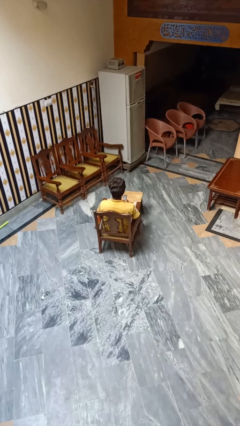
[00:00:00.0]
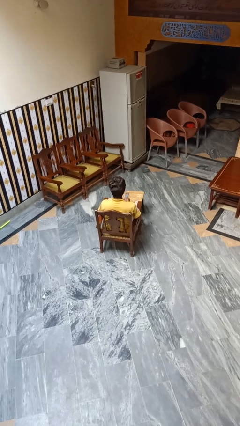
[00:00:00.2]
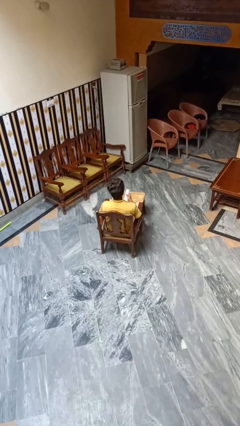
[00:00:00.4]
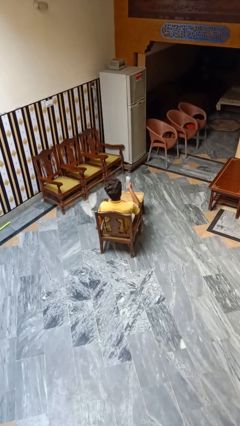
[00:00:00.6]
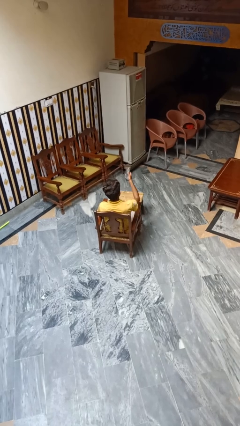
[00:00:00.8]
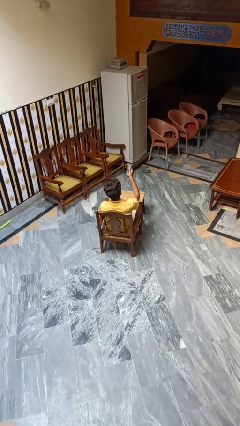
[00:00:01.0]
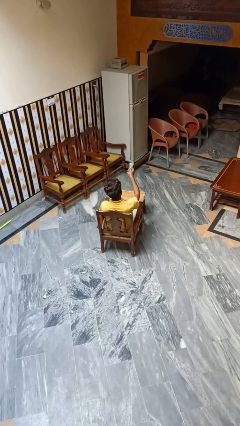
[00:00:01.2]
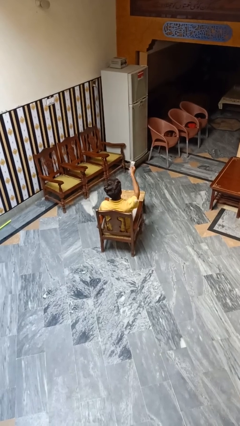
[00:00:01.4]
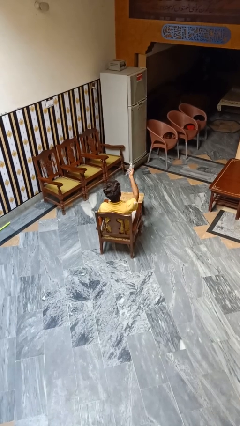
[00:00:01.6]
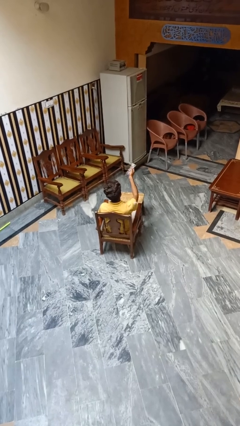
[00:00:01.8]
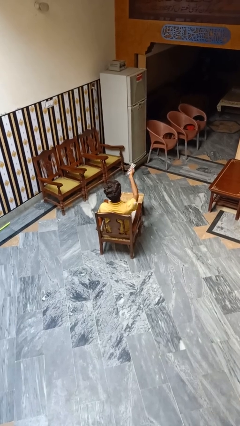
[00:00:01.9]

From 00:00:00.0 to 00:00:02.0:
person uses television remote

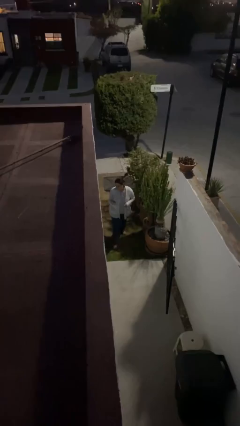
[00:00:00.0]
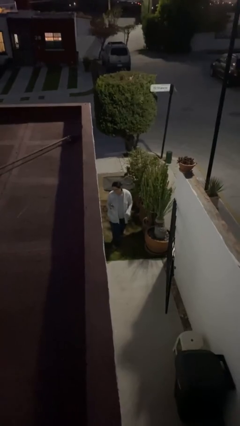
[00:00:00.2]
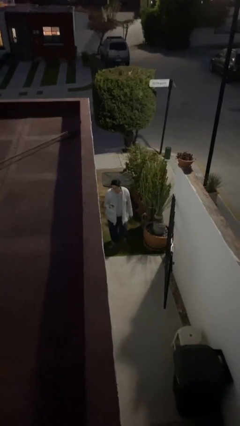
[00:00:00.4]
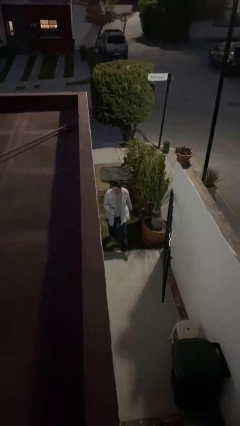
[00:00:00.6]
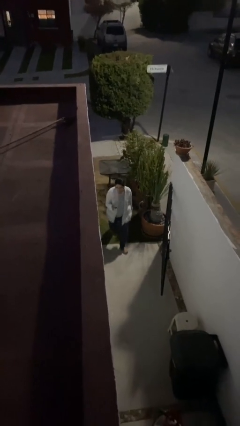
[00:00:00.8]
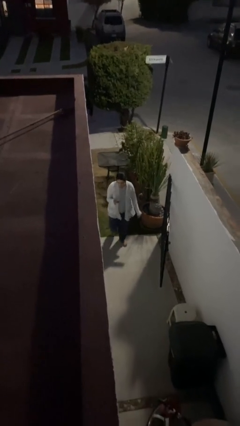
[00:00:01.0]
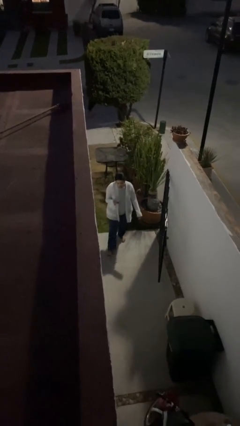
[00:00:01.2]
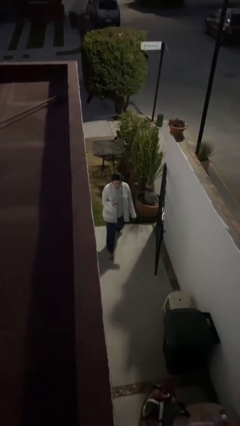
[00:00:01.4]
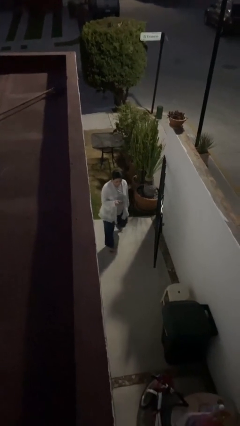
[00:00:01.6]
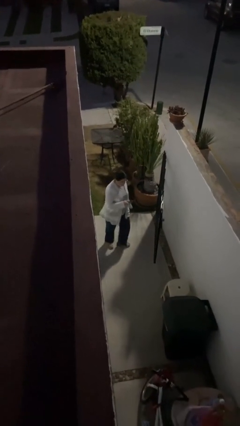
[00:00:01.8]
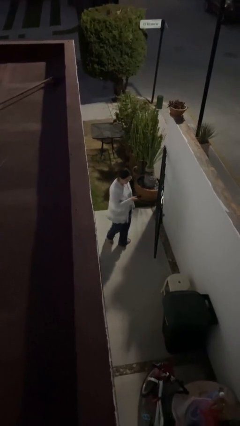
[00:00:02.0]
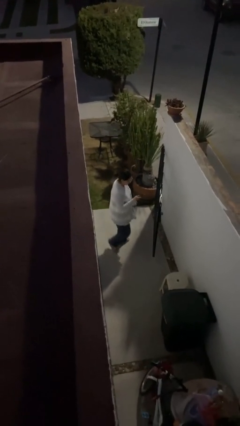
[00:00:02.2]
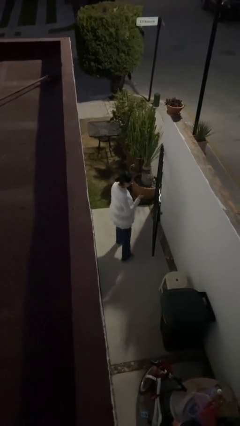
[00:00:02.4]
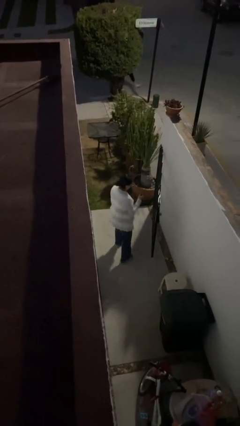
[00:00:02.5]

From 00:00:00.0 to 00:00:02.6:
person enters scene through structure

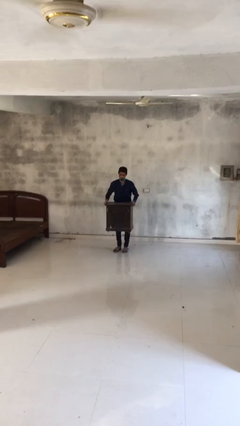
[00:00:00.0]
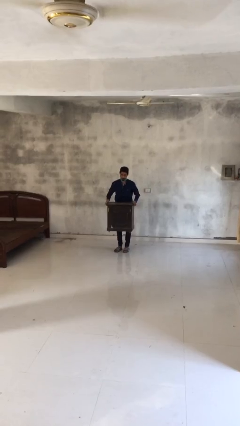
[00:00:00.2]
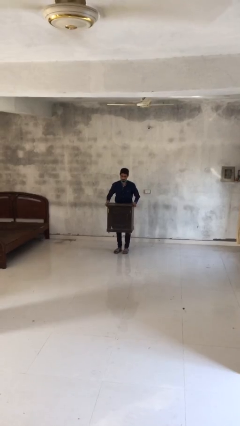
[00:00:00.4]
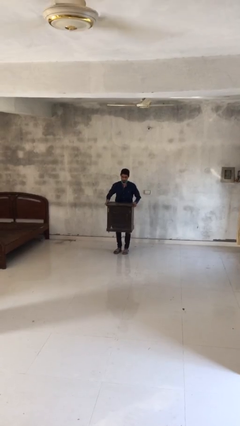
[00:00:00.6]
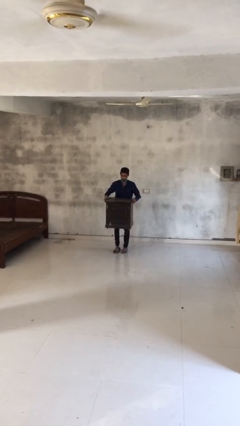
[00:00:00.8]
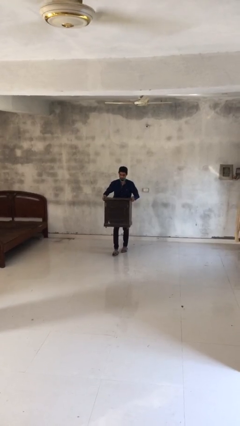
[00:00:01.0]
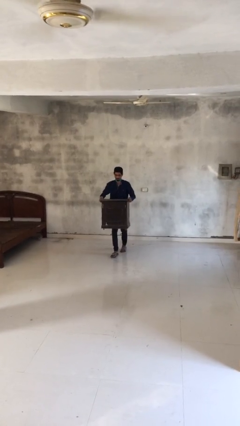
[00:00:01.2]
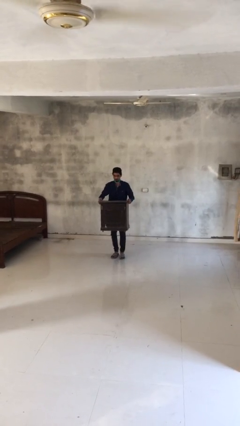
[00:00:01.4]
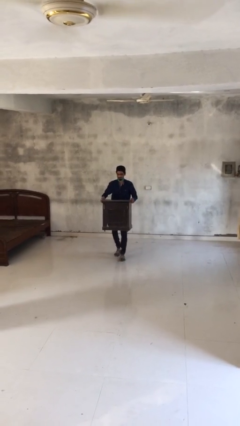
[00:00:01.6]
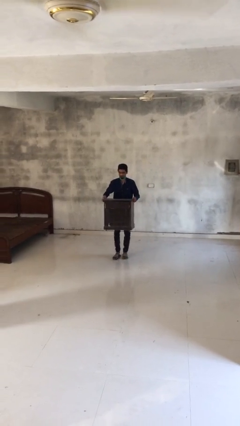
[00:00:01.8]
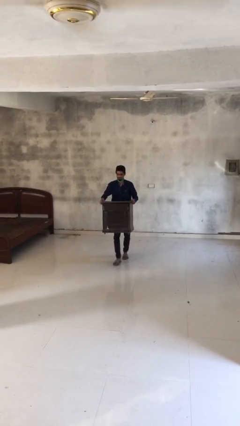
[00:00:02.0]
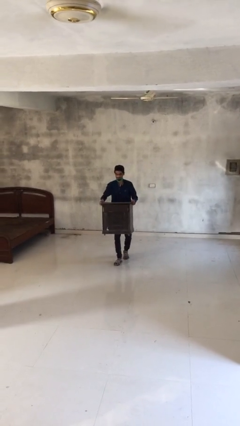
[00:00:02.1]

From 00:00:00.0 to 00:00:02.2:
person carries heavy object

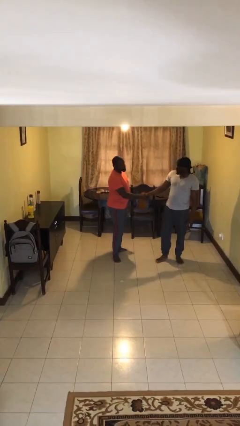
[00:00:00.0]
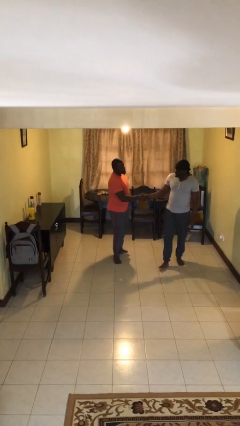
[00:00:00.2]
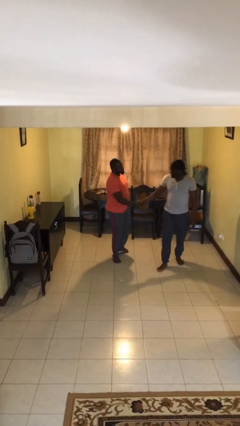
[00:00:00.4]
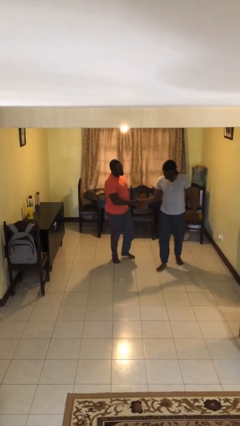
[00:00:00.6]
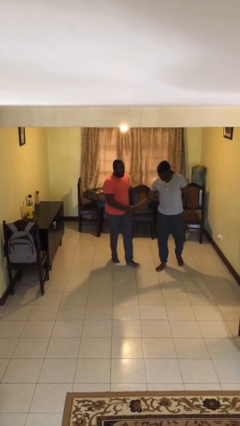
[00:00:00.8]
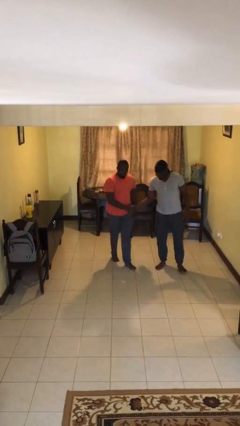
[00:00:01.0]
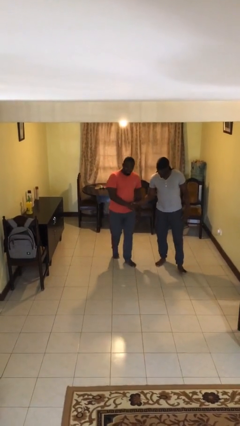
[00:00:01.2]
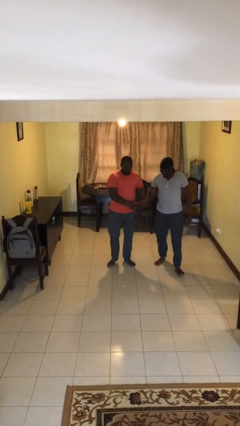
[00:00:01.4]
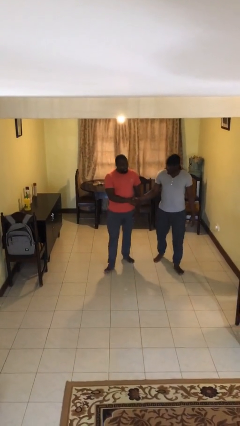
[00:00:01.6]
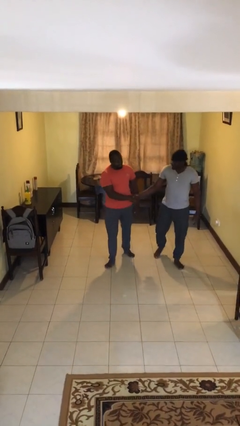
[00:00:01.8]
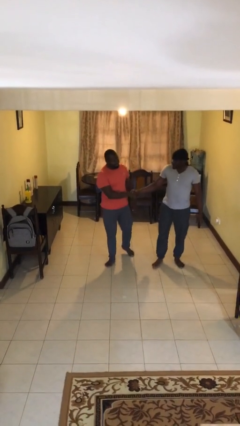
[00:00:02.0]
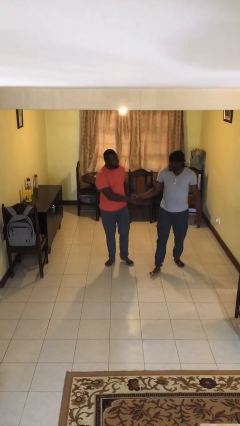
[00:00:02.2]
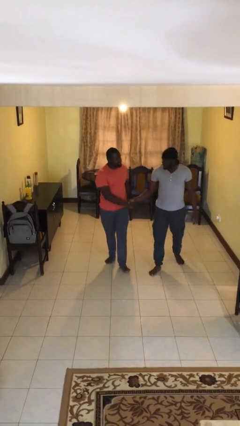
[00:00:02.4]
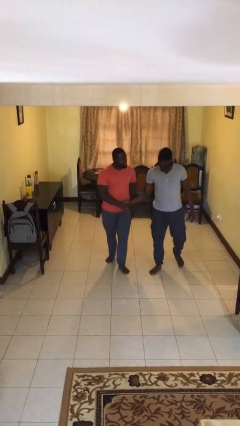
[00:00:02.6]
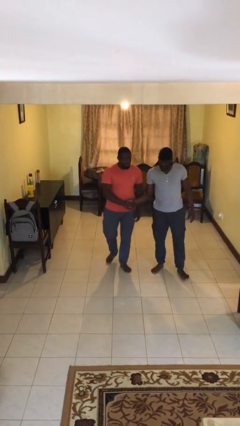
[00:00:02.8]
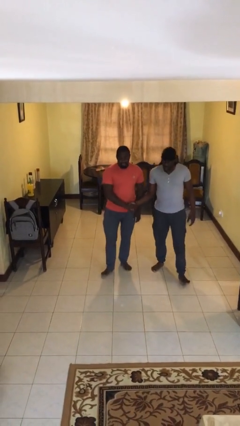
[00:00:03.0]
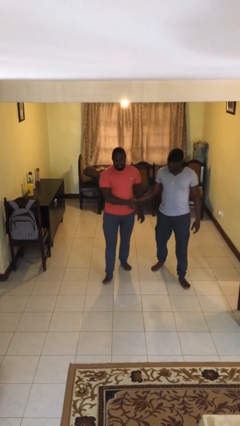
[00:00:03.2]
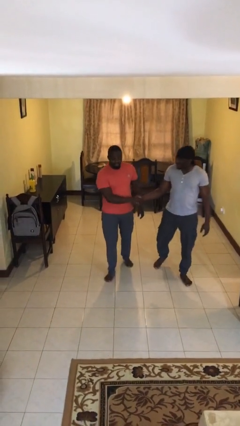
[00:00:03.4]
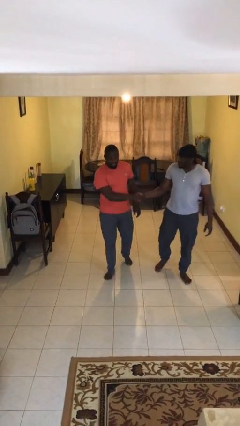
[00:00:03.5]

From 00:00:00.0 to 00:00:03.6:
person holds hand

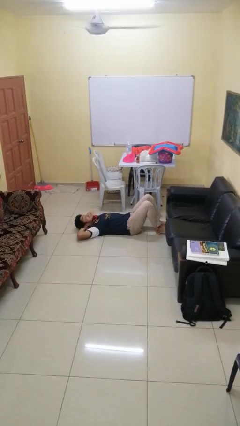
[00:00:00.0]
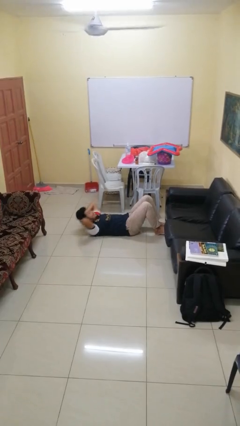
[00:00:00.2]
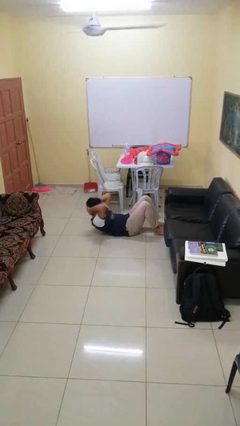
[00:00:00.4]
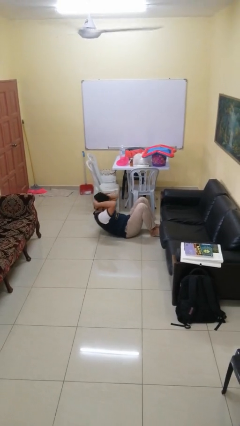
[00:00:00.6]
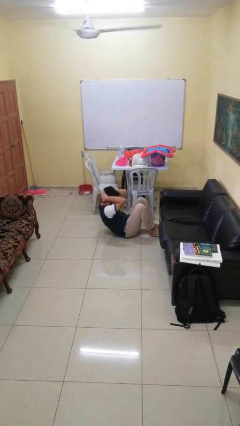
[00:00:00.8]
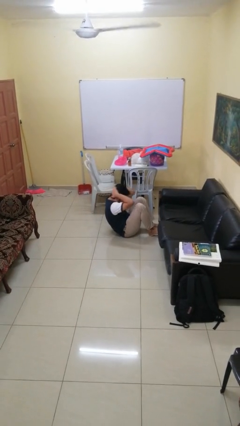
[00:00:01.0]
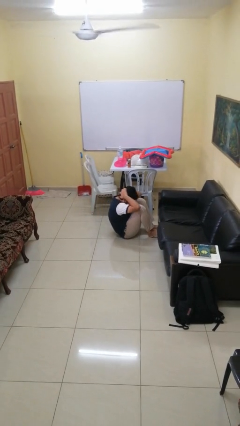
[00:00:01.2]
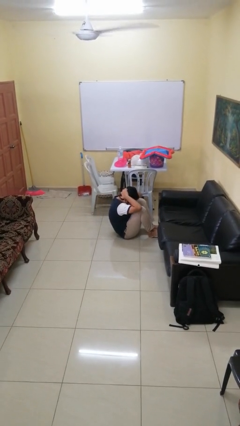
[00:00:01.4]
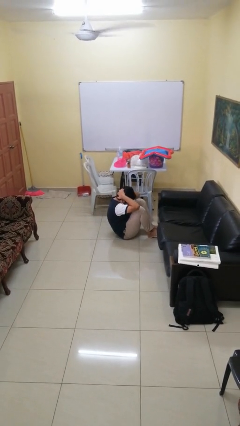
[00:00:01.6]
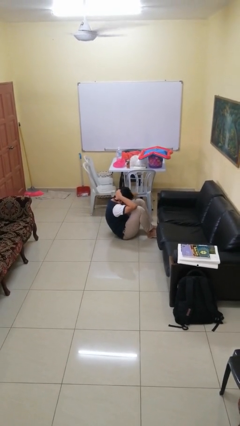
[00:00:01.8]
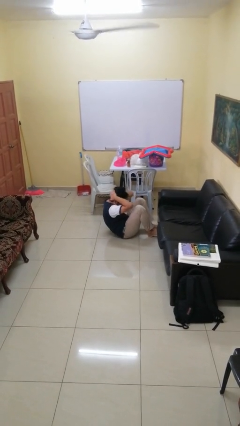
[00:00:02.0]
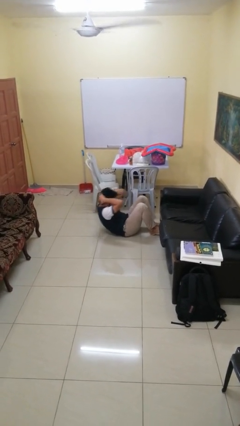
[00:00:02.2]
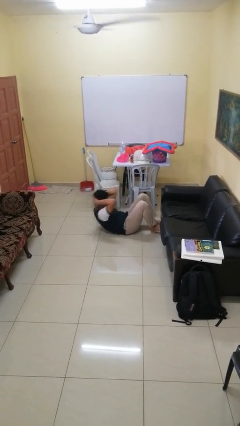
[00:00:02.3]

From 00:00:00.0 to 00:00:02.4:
person exercises with situp

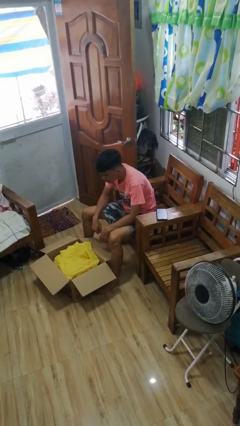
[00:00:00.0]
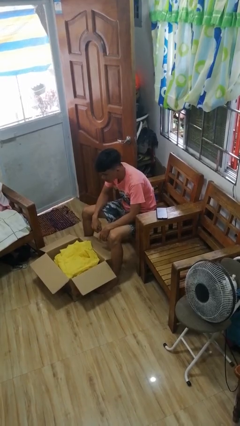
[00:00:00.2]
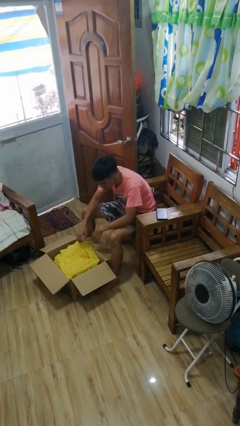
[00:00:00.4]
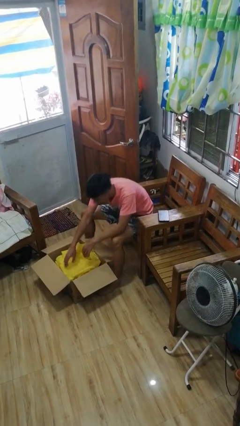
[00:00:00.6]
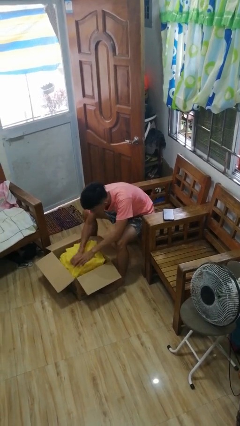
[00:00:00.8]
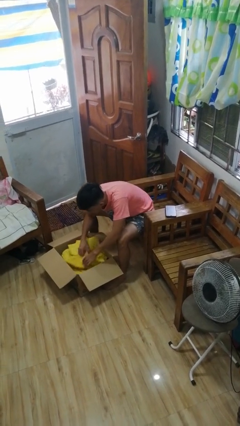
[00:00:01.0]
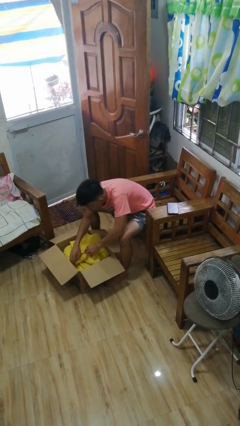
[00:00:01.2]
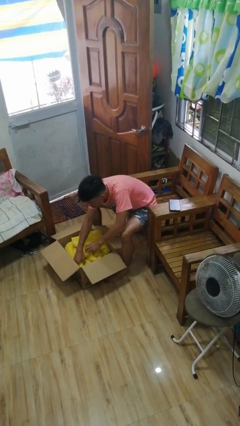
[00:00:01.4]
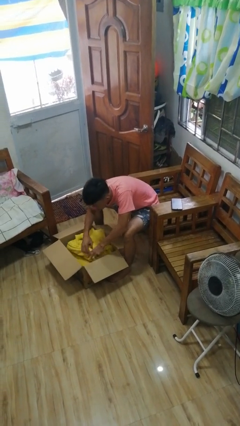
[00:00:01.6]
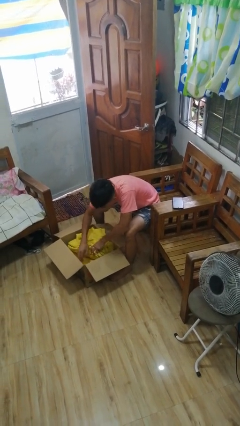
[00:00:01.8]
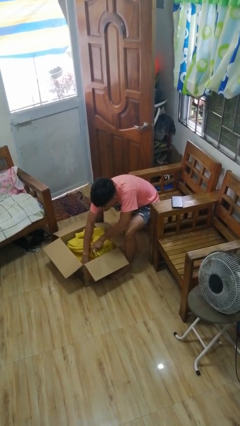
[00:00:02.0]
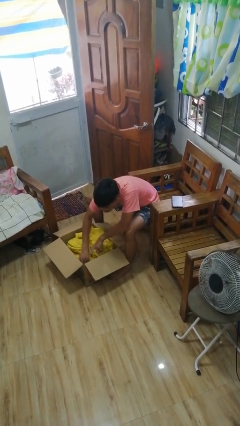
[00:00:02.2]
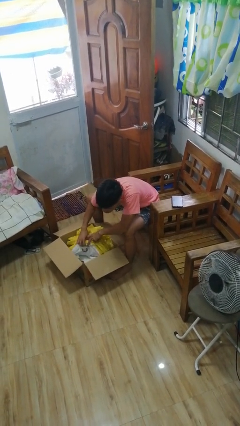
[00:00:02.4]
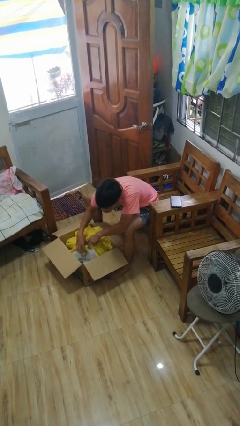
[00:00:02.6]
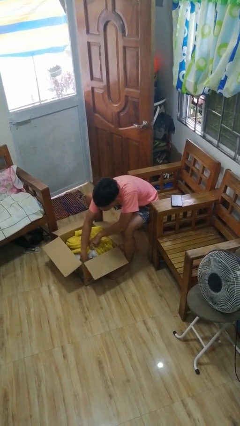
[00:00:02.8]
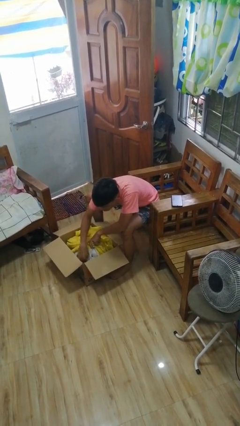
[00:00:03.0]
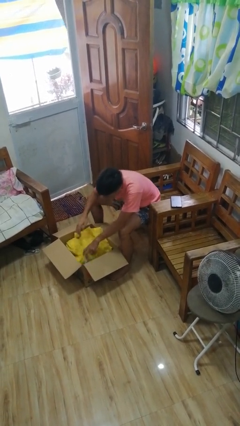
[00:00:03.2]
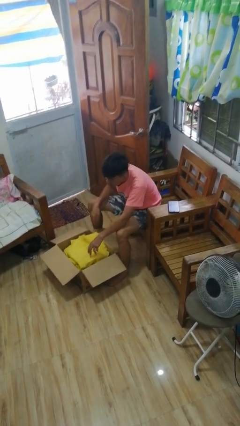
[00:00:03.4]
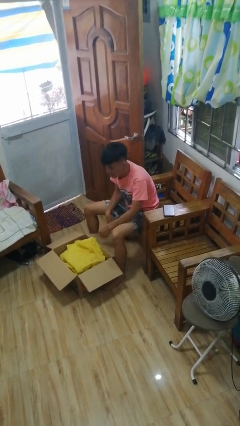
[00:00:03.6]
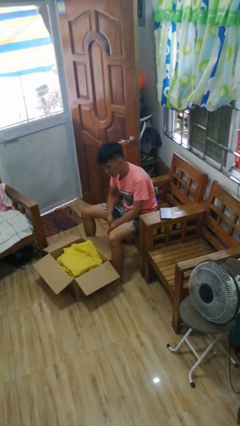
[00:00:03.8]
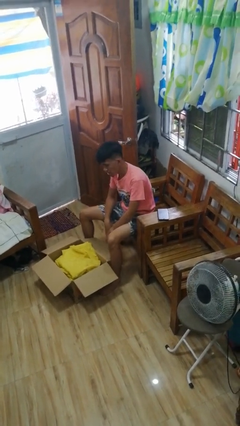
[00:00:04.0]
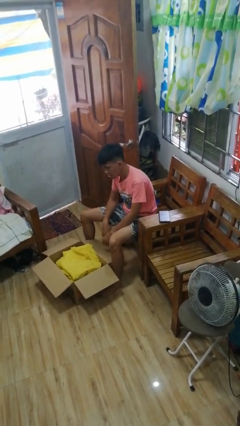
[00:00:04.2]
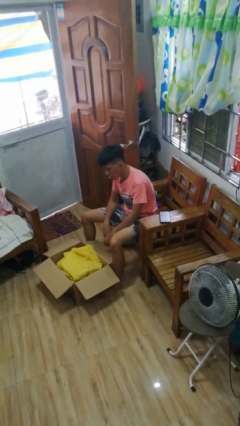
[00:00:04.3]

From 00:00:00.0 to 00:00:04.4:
person searches in box
